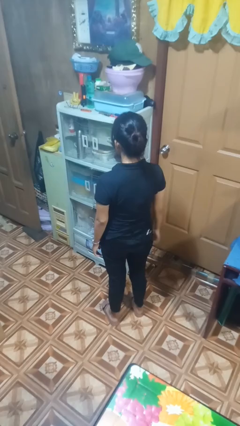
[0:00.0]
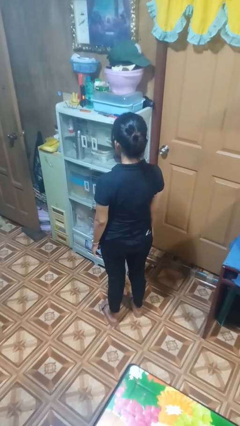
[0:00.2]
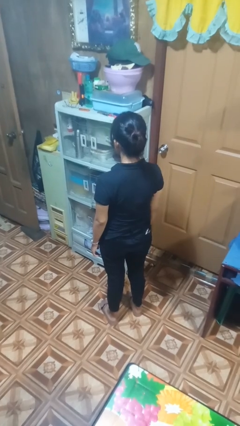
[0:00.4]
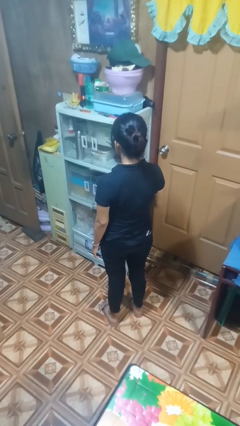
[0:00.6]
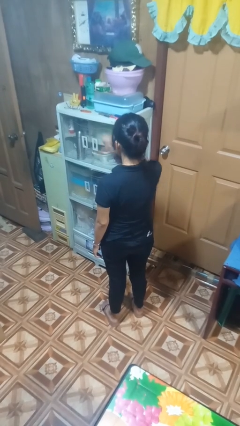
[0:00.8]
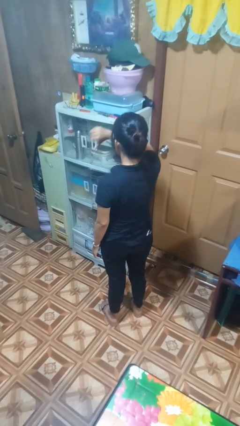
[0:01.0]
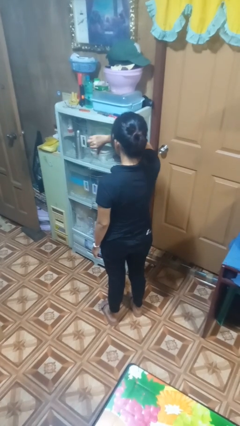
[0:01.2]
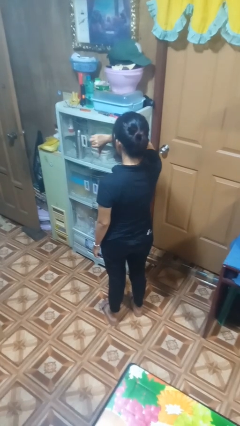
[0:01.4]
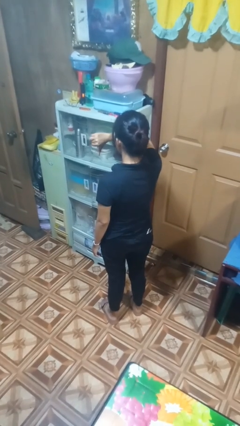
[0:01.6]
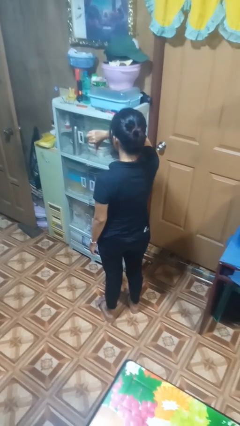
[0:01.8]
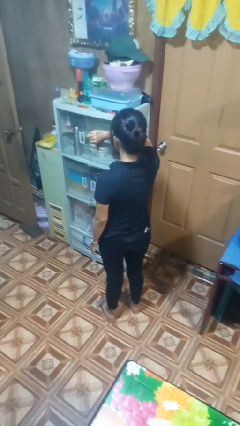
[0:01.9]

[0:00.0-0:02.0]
person gestures thumbs down

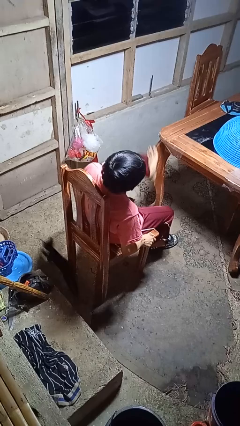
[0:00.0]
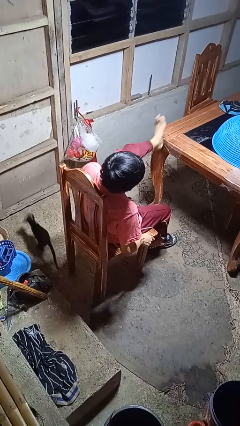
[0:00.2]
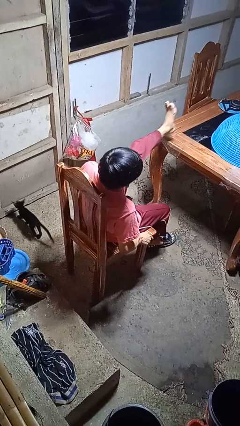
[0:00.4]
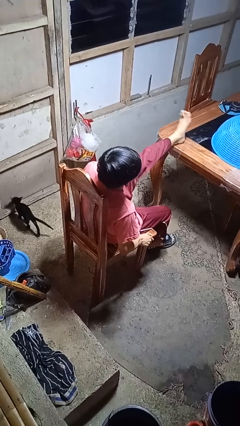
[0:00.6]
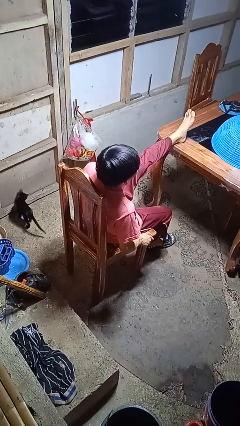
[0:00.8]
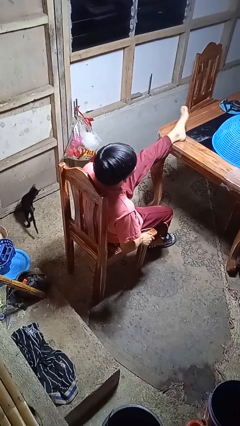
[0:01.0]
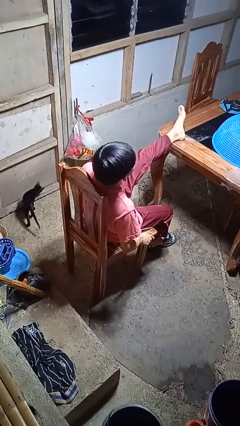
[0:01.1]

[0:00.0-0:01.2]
person puts feet up

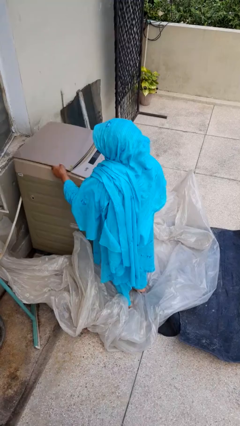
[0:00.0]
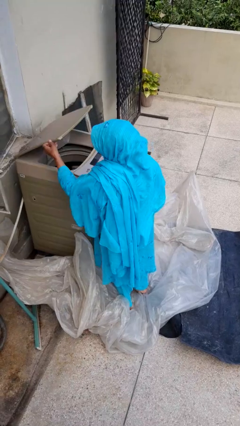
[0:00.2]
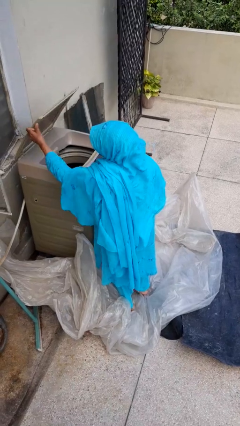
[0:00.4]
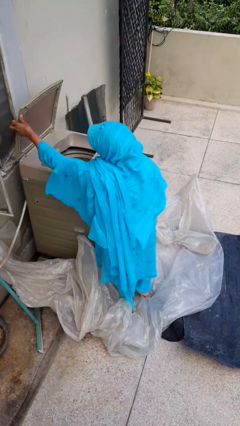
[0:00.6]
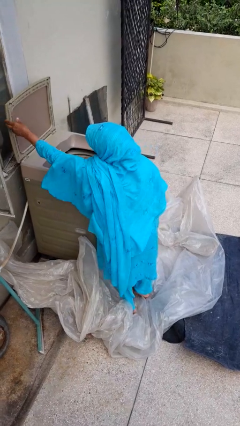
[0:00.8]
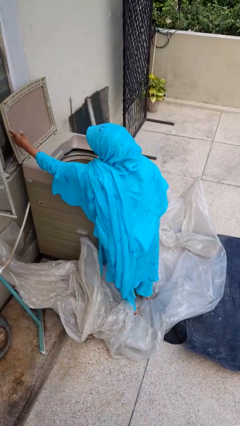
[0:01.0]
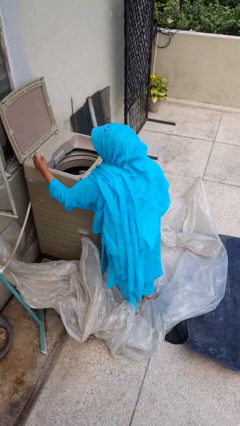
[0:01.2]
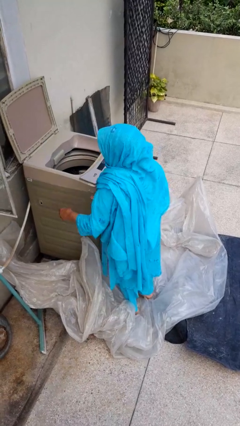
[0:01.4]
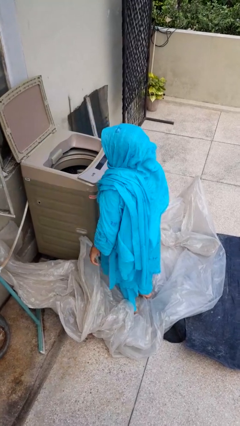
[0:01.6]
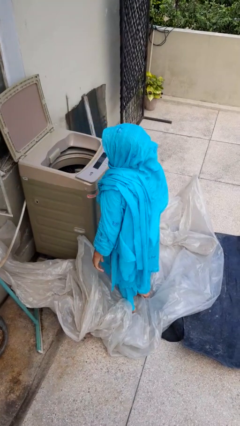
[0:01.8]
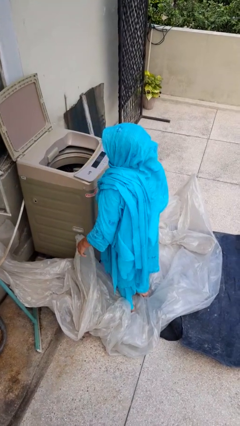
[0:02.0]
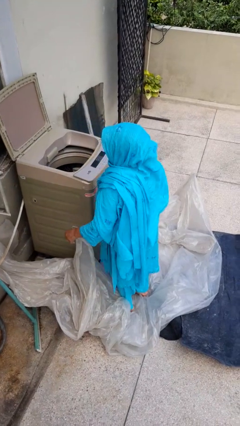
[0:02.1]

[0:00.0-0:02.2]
person opens clothes washer

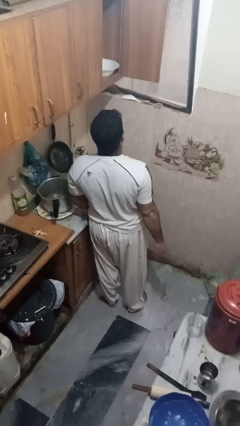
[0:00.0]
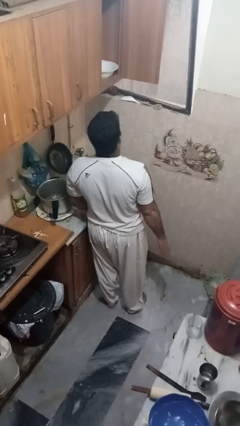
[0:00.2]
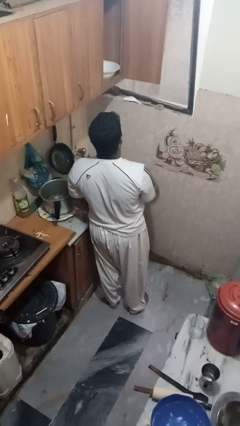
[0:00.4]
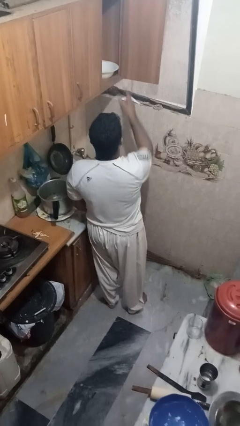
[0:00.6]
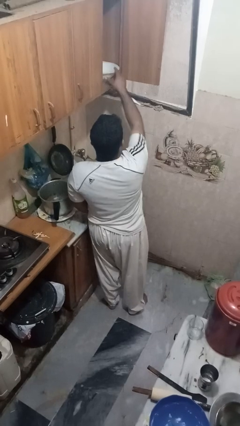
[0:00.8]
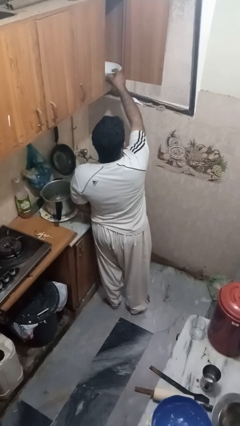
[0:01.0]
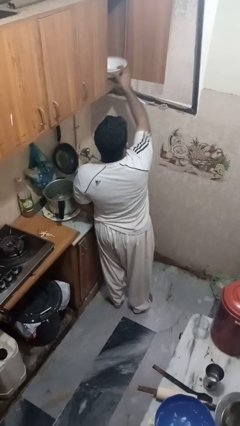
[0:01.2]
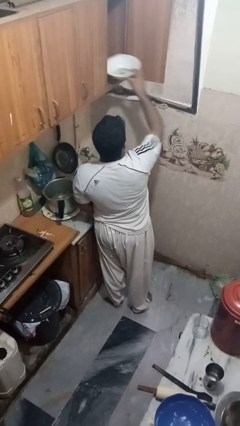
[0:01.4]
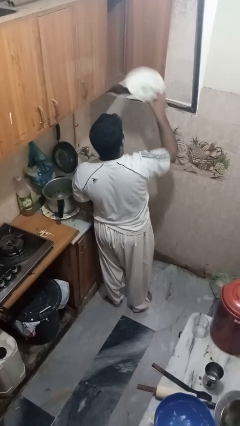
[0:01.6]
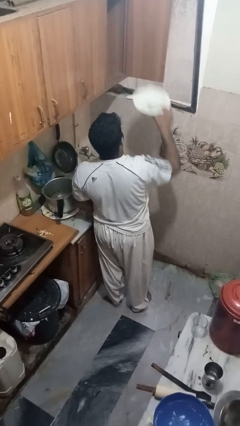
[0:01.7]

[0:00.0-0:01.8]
person takes object from cabinet

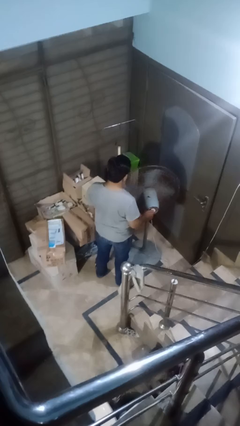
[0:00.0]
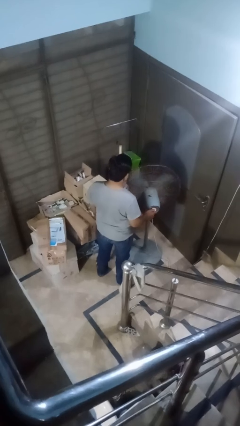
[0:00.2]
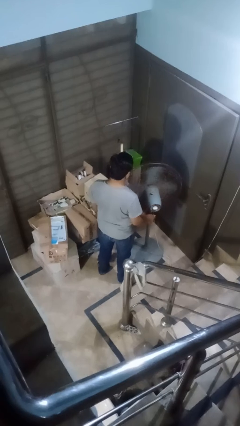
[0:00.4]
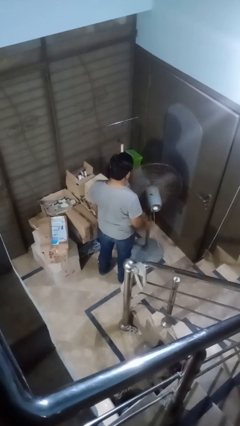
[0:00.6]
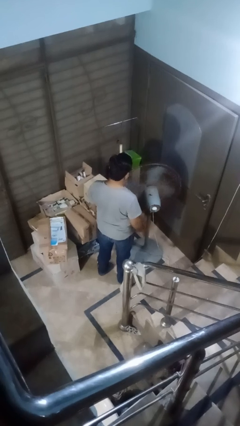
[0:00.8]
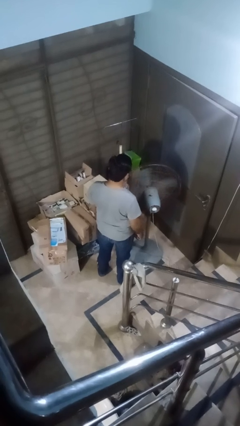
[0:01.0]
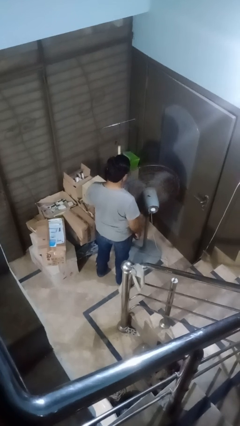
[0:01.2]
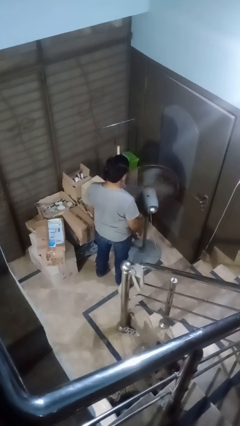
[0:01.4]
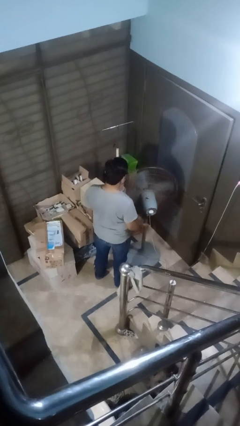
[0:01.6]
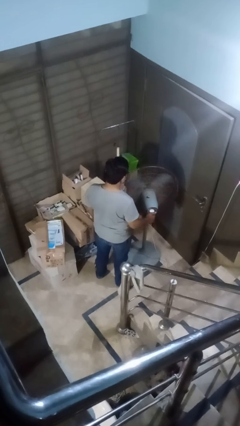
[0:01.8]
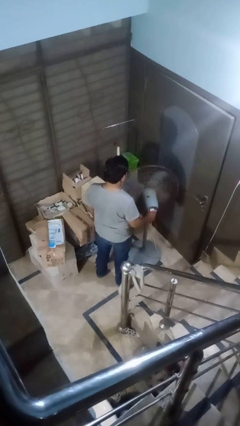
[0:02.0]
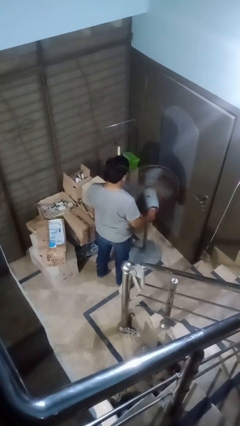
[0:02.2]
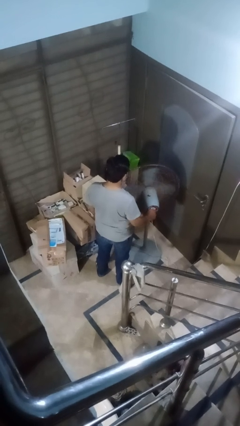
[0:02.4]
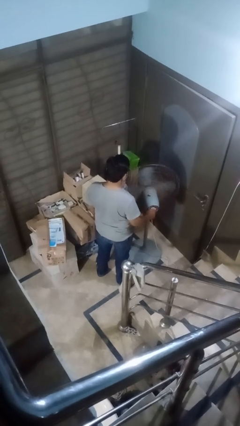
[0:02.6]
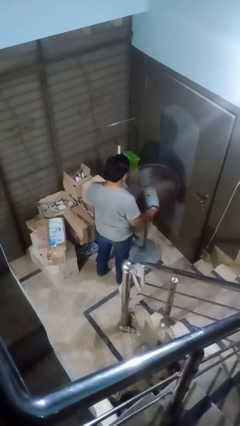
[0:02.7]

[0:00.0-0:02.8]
person turns off fan

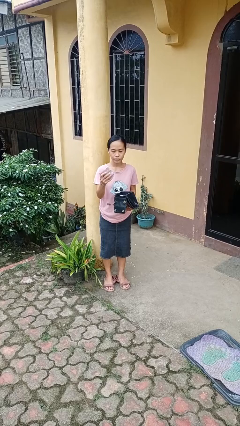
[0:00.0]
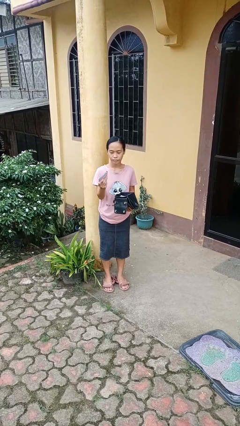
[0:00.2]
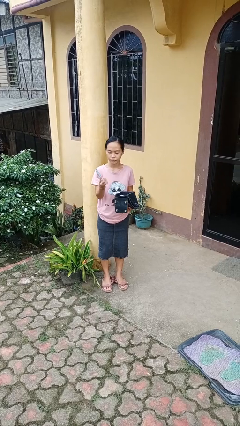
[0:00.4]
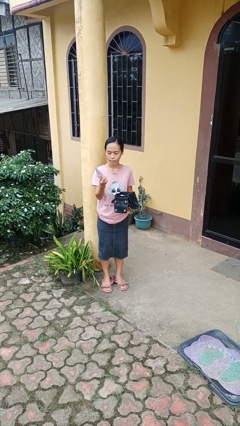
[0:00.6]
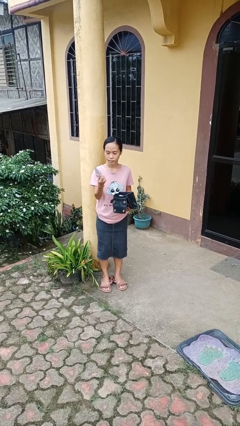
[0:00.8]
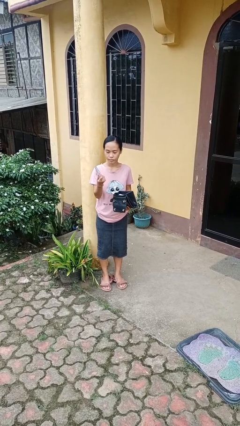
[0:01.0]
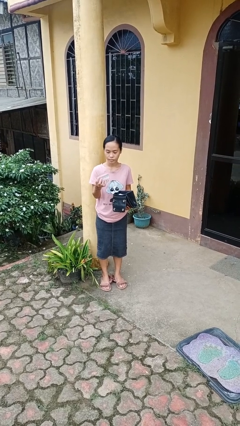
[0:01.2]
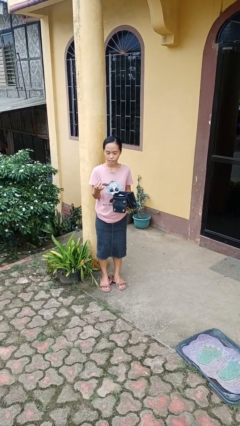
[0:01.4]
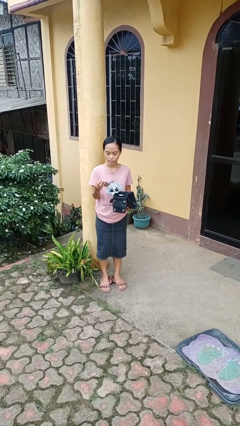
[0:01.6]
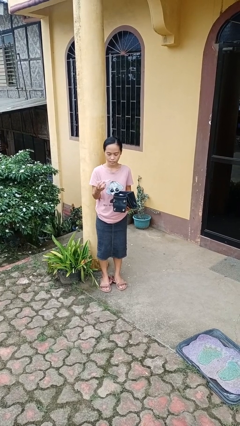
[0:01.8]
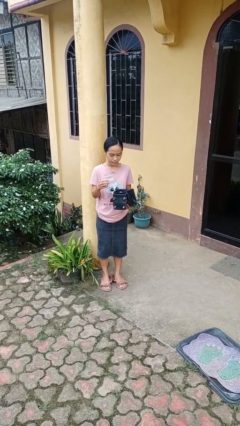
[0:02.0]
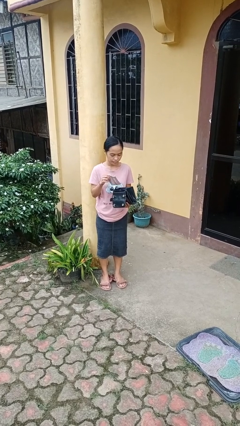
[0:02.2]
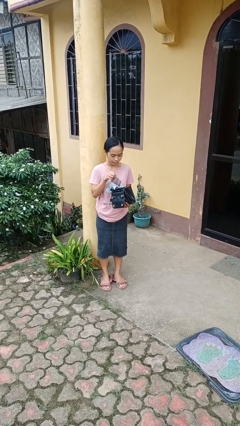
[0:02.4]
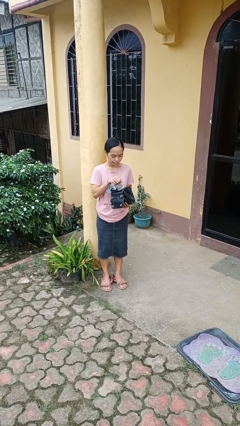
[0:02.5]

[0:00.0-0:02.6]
person takes object from purse

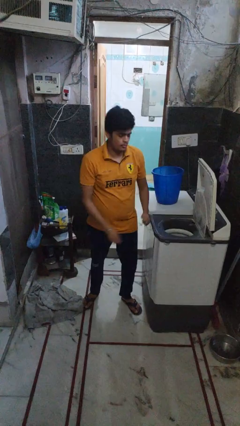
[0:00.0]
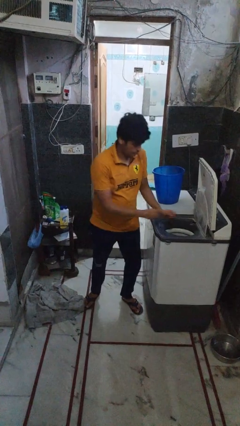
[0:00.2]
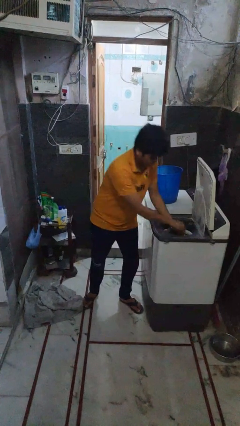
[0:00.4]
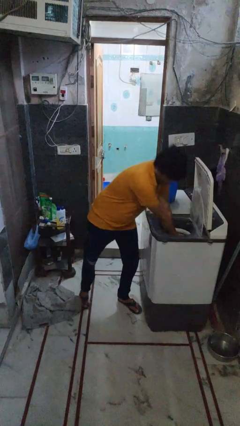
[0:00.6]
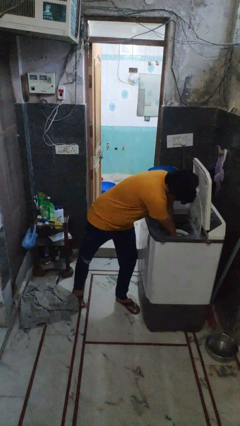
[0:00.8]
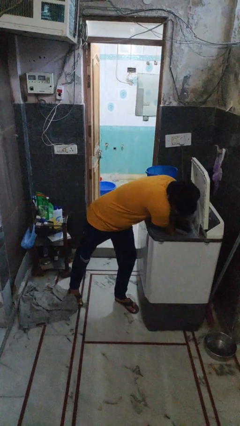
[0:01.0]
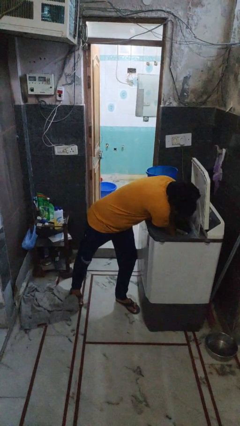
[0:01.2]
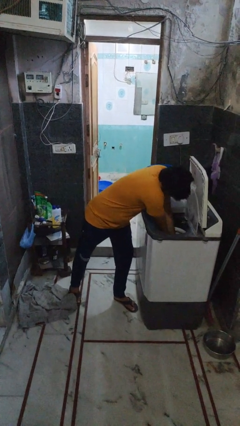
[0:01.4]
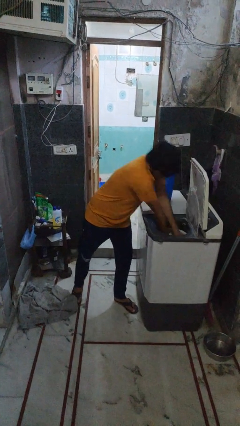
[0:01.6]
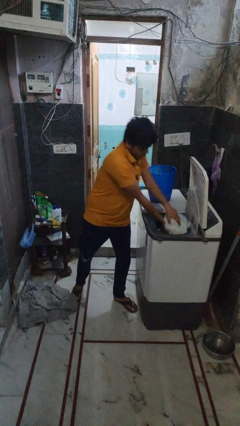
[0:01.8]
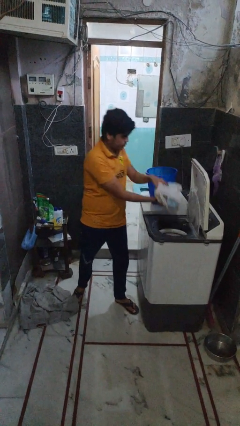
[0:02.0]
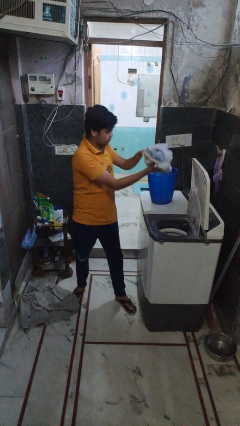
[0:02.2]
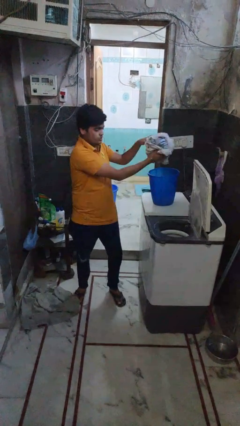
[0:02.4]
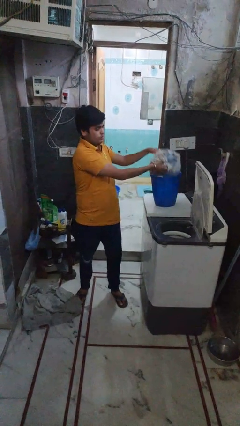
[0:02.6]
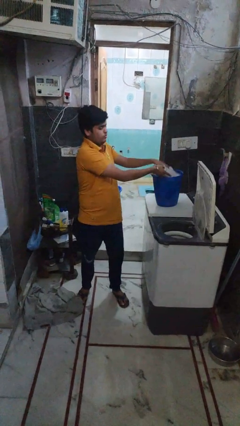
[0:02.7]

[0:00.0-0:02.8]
person unloads clotheswasher

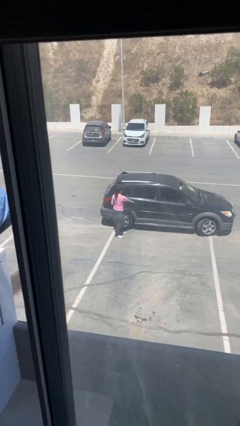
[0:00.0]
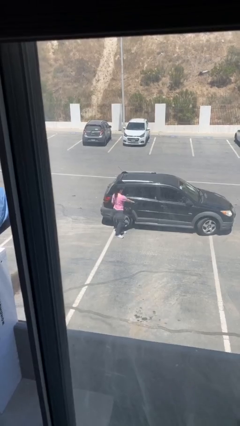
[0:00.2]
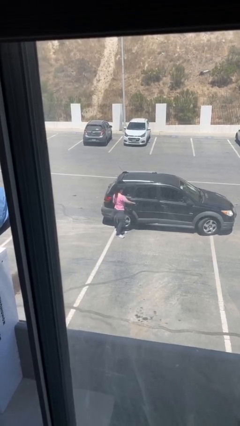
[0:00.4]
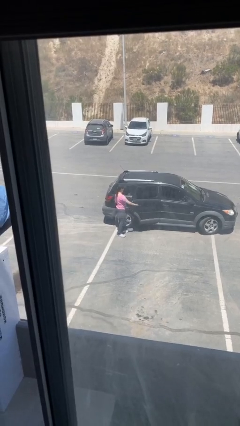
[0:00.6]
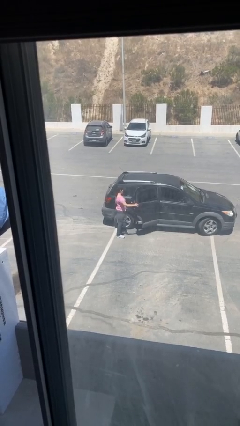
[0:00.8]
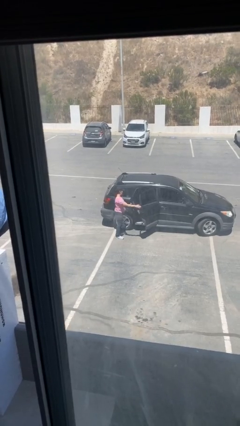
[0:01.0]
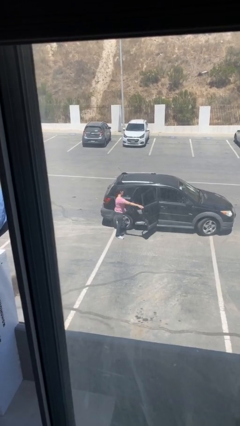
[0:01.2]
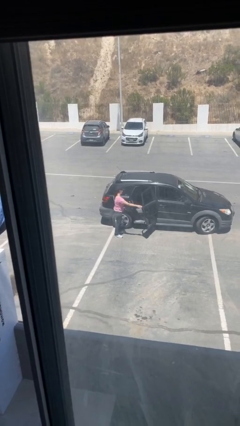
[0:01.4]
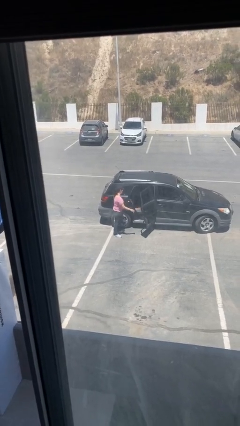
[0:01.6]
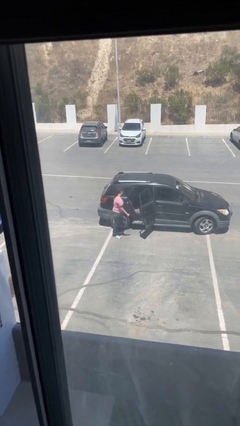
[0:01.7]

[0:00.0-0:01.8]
person opens car door
